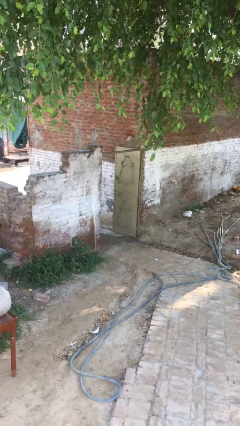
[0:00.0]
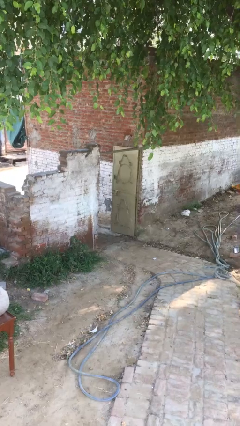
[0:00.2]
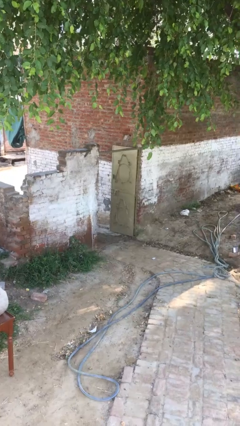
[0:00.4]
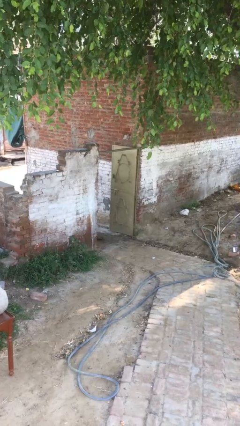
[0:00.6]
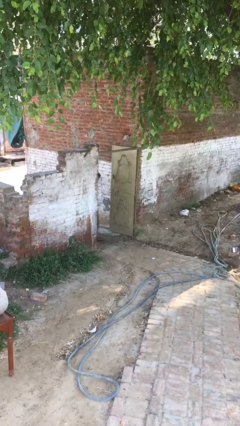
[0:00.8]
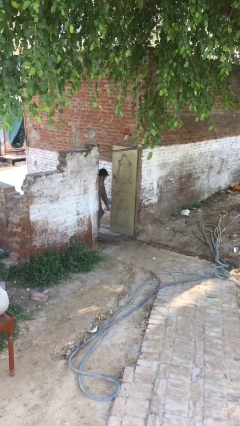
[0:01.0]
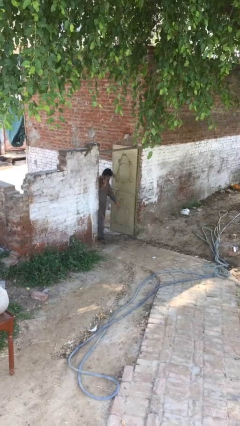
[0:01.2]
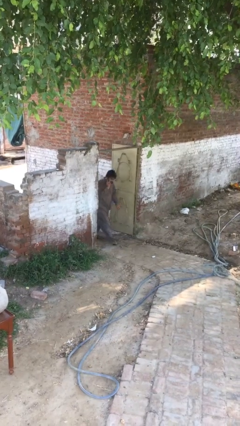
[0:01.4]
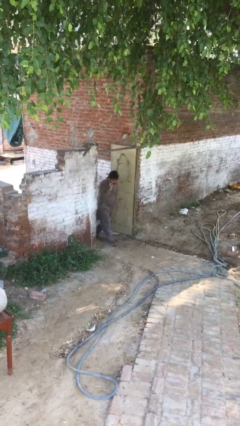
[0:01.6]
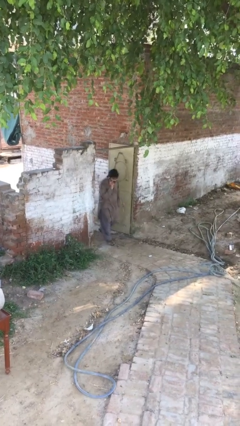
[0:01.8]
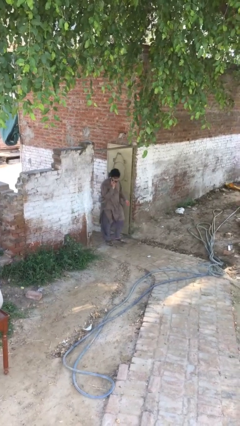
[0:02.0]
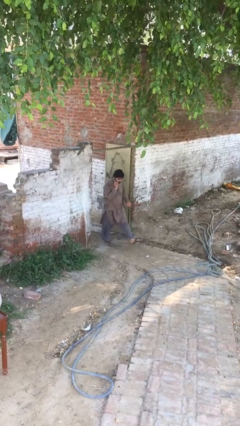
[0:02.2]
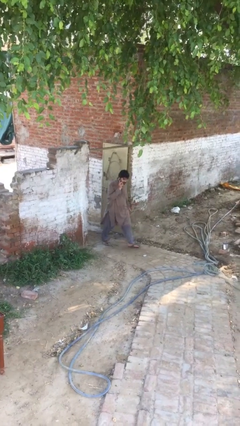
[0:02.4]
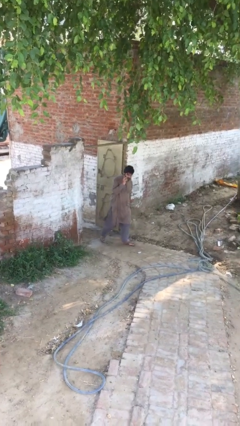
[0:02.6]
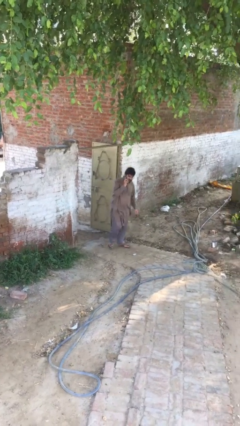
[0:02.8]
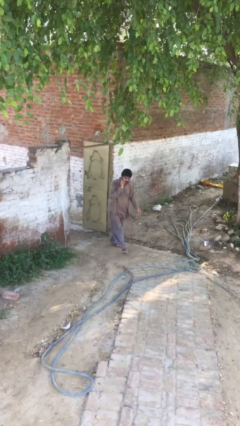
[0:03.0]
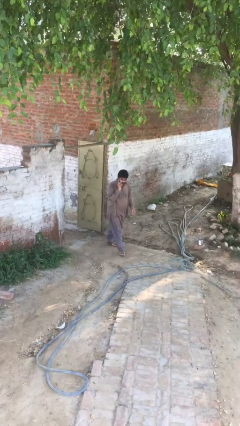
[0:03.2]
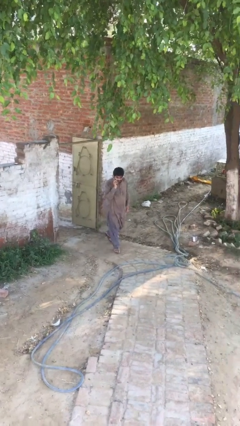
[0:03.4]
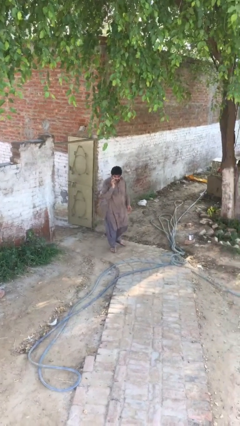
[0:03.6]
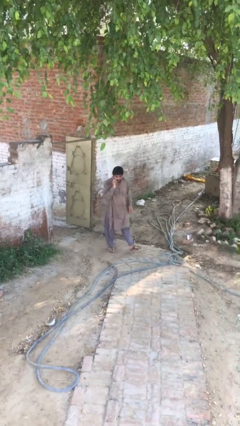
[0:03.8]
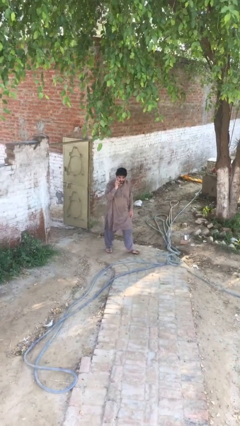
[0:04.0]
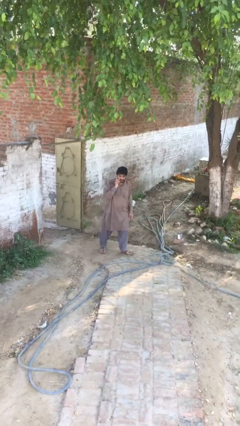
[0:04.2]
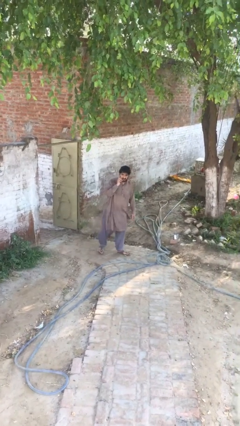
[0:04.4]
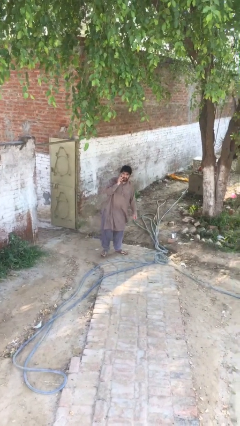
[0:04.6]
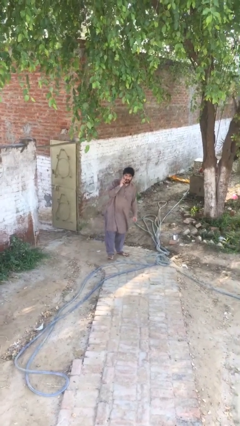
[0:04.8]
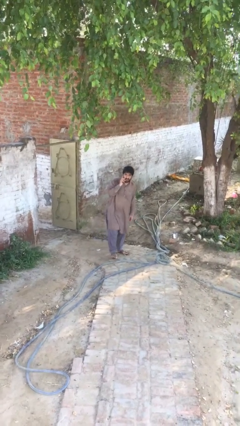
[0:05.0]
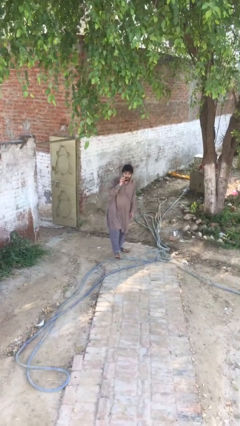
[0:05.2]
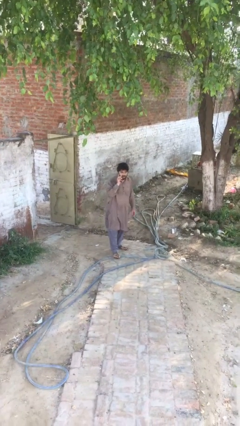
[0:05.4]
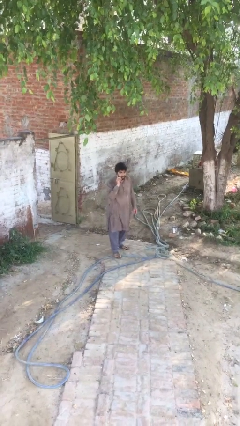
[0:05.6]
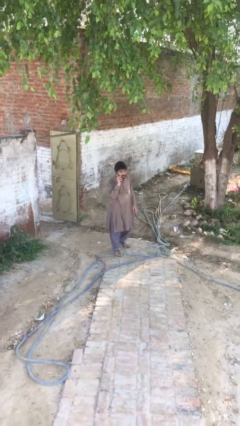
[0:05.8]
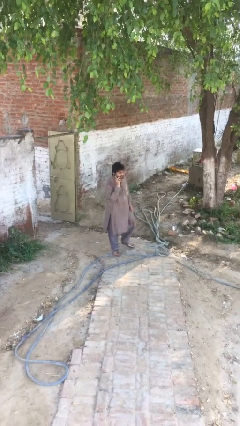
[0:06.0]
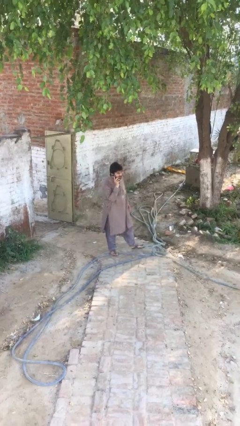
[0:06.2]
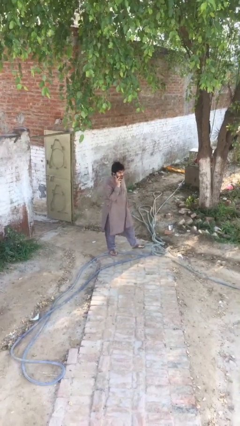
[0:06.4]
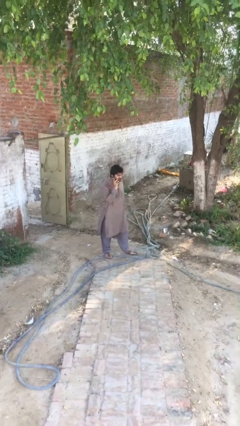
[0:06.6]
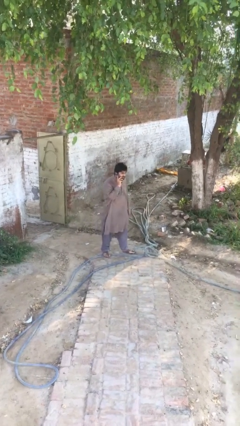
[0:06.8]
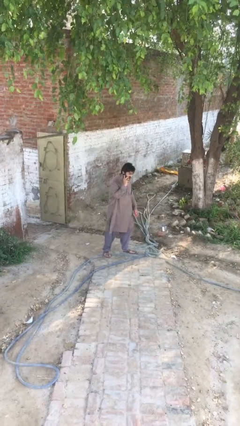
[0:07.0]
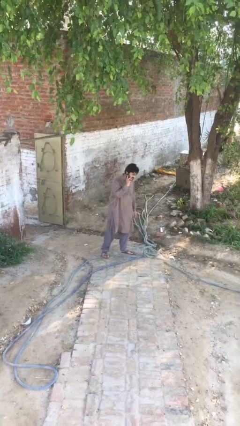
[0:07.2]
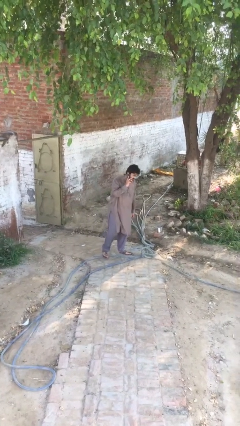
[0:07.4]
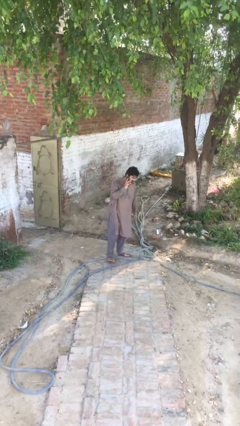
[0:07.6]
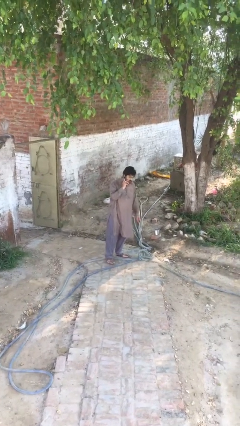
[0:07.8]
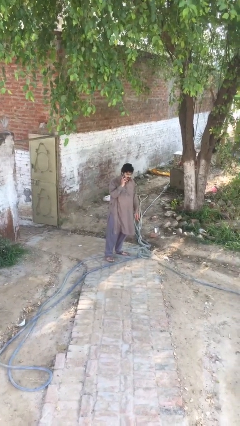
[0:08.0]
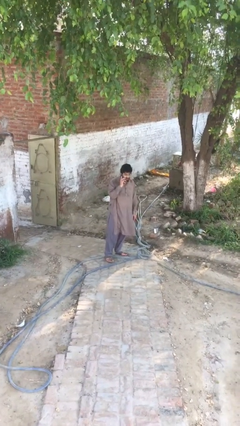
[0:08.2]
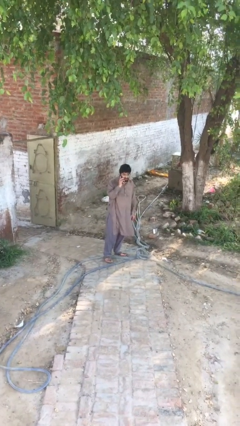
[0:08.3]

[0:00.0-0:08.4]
person enters scene through structure

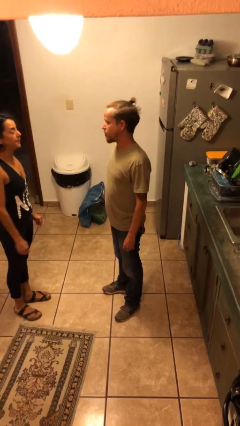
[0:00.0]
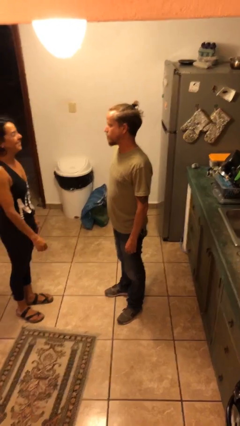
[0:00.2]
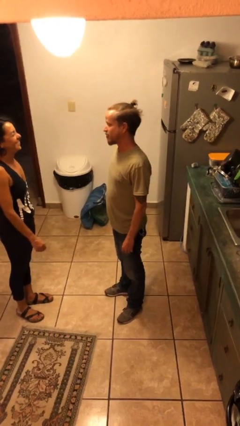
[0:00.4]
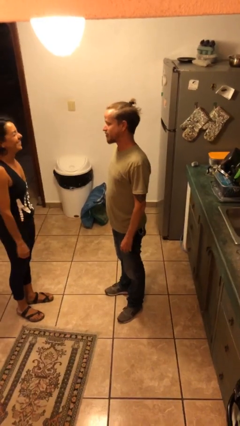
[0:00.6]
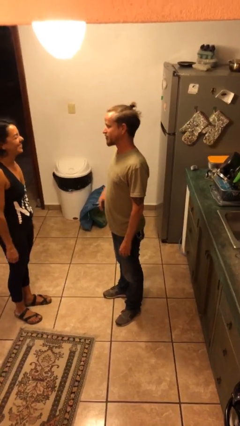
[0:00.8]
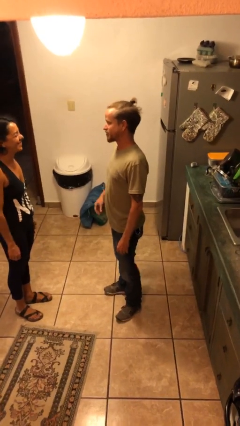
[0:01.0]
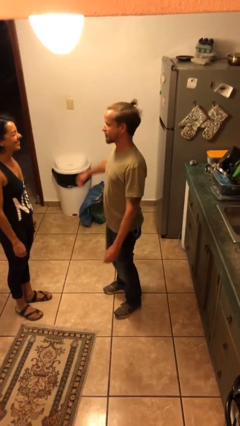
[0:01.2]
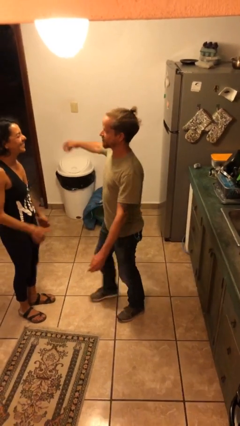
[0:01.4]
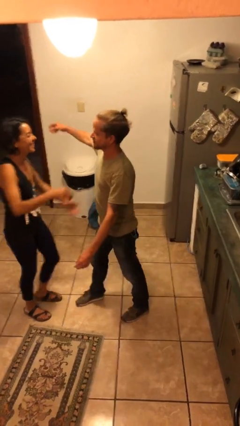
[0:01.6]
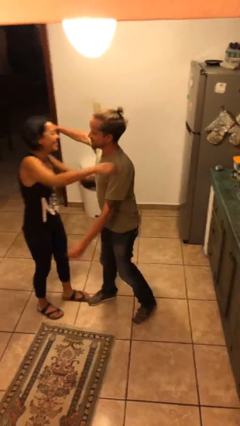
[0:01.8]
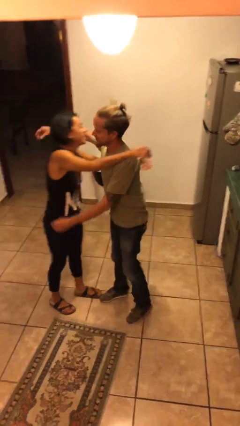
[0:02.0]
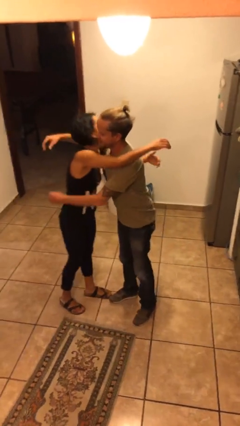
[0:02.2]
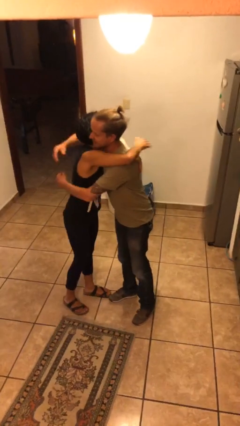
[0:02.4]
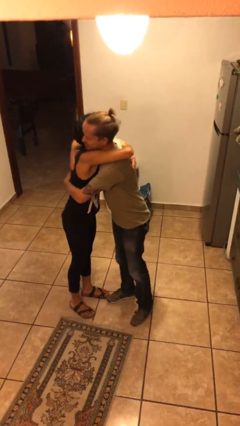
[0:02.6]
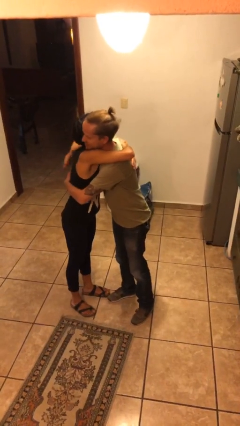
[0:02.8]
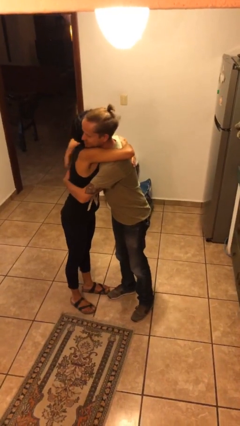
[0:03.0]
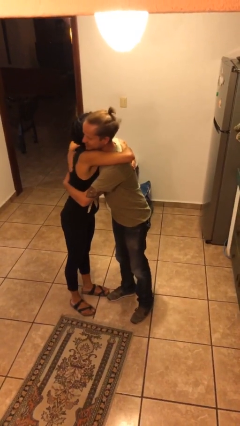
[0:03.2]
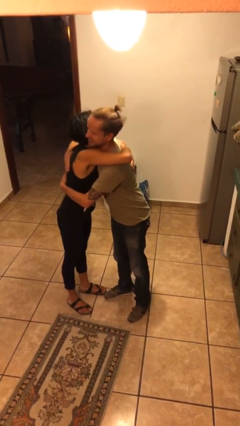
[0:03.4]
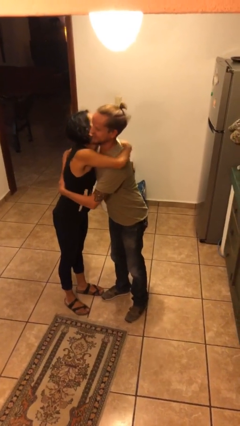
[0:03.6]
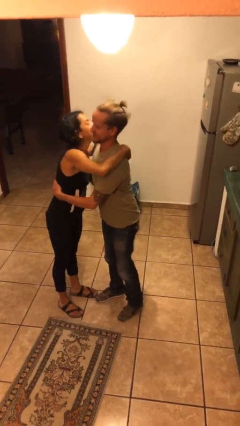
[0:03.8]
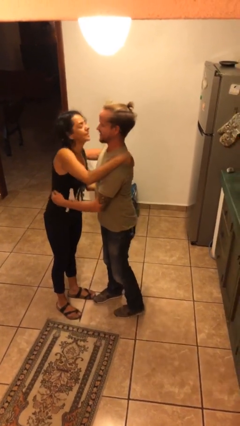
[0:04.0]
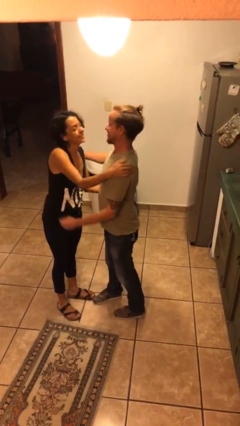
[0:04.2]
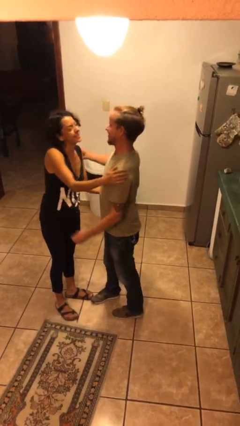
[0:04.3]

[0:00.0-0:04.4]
person embraces person

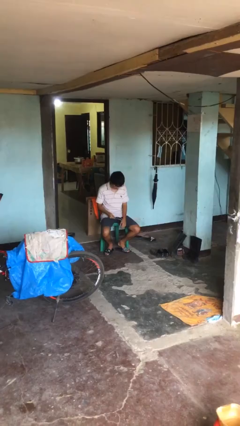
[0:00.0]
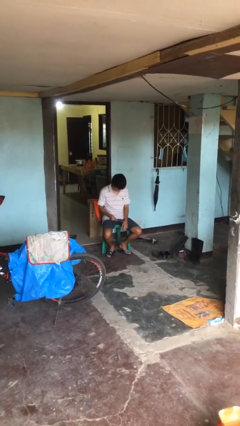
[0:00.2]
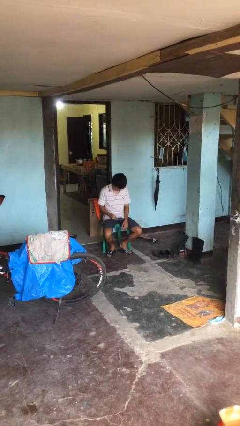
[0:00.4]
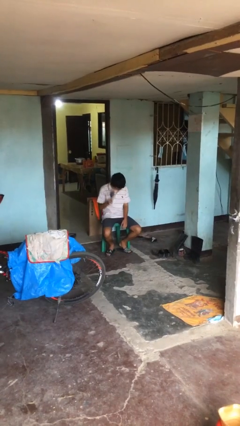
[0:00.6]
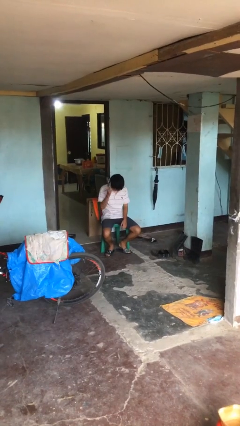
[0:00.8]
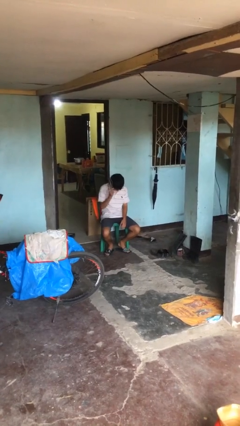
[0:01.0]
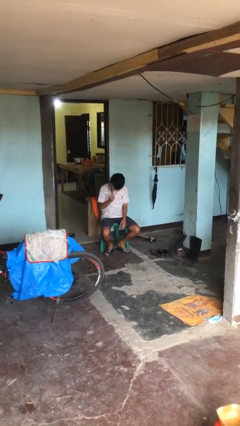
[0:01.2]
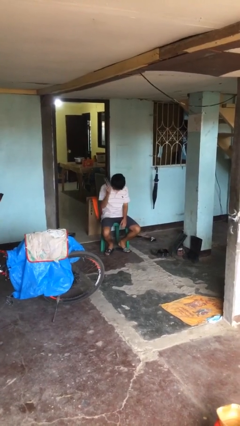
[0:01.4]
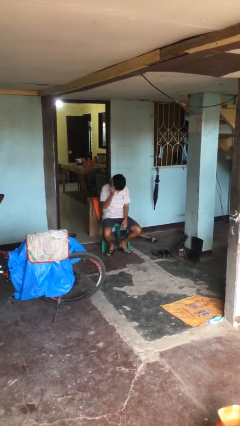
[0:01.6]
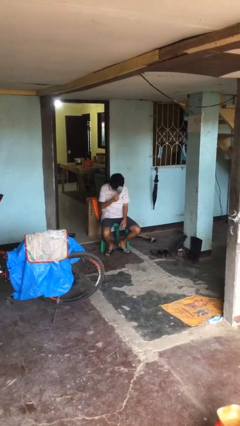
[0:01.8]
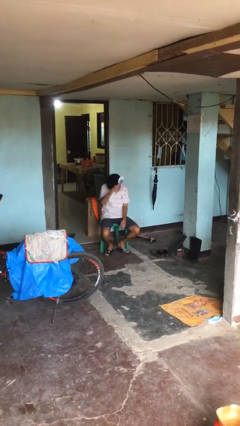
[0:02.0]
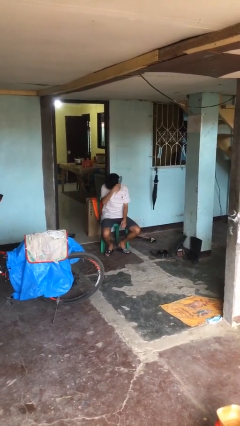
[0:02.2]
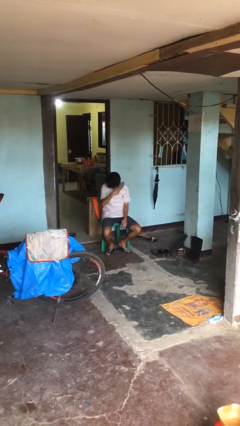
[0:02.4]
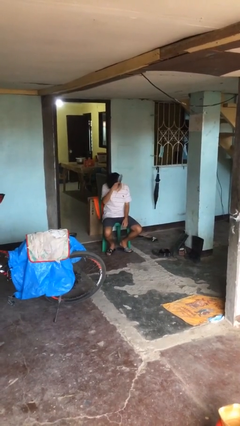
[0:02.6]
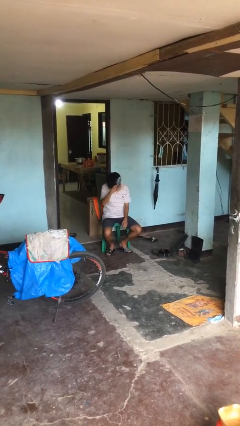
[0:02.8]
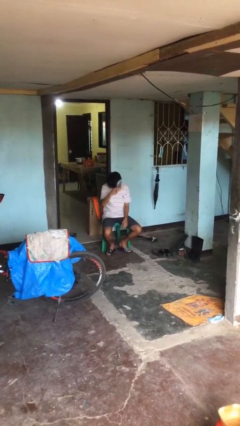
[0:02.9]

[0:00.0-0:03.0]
person brushes hair

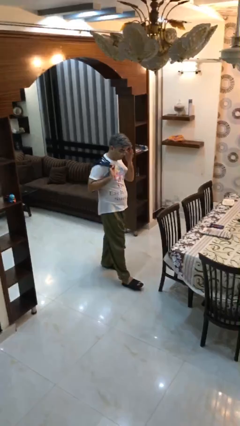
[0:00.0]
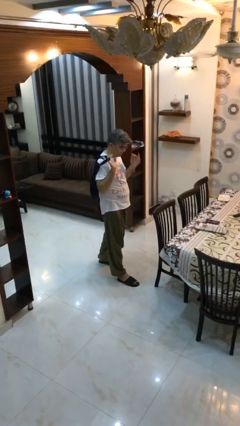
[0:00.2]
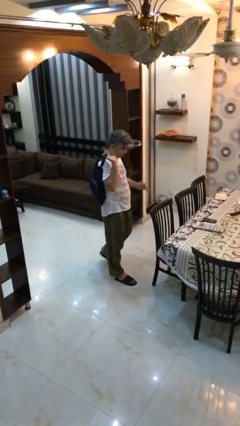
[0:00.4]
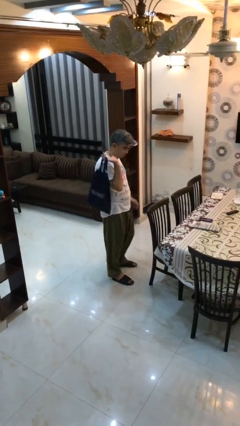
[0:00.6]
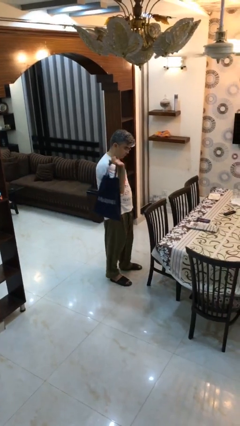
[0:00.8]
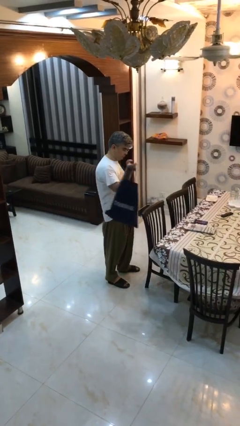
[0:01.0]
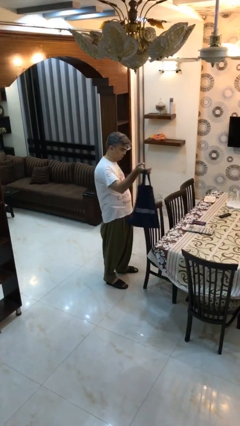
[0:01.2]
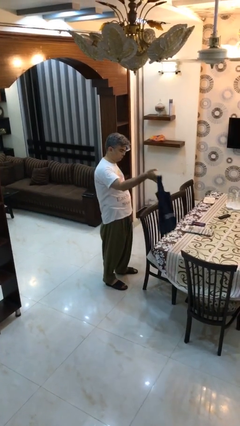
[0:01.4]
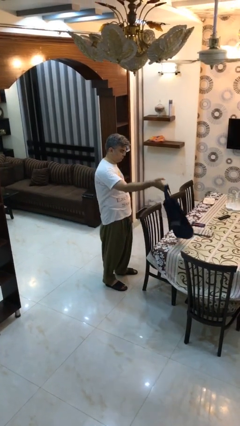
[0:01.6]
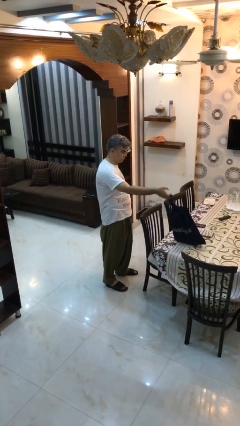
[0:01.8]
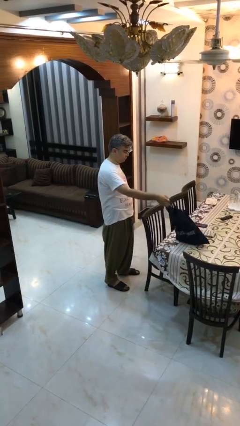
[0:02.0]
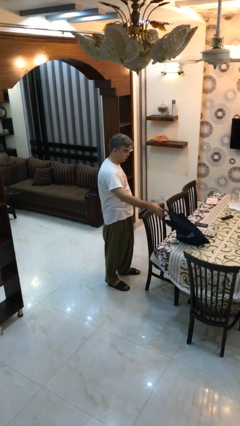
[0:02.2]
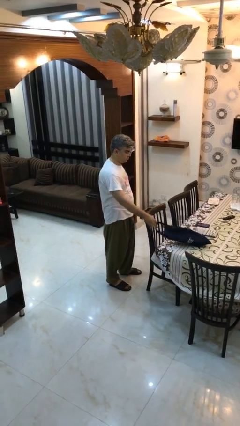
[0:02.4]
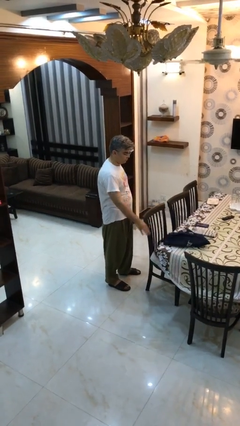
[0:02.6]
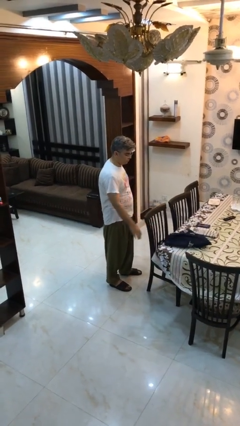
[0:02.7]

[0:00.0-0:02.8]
person puts down object on table
